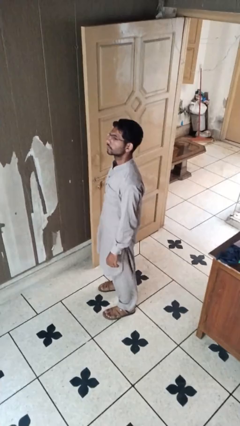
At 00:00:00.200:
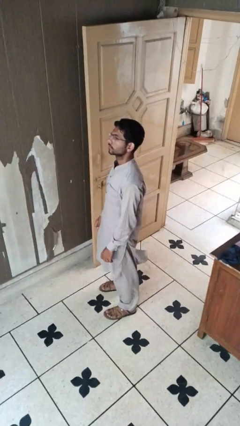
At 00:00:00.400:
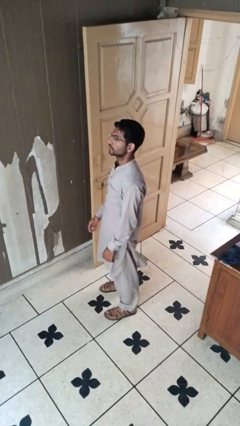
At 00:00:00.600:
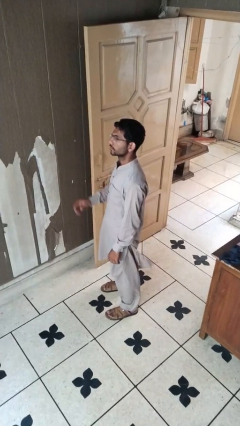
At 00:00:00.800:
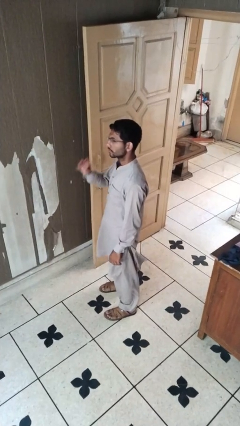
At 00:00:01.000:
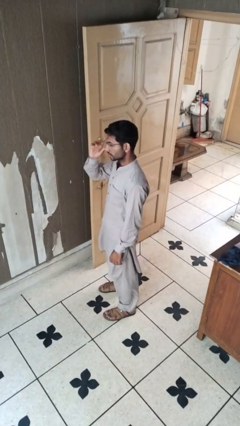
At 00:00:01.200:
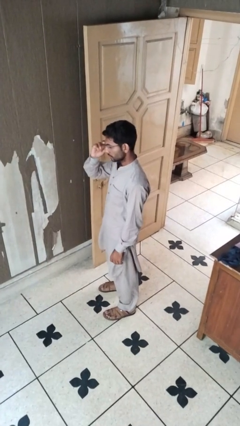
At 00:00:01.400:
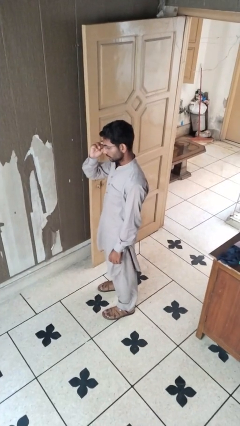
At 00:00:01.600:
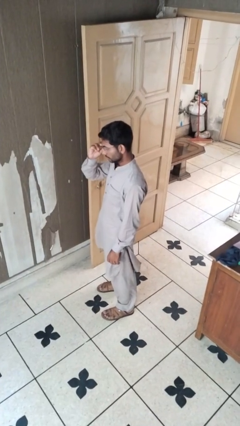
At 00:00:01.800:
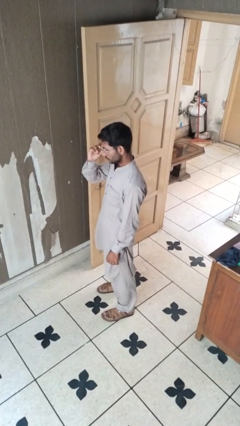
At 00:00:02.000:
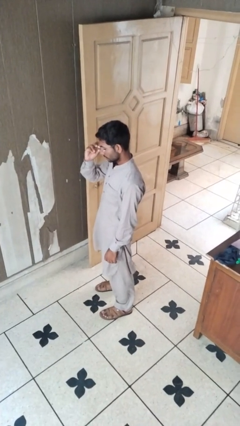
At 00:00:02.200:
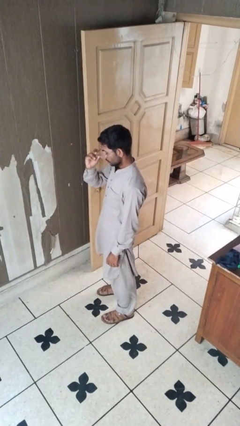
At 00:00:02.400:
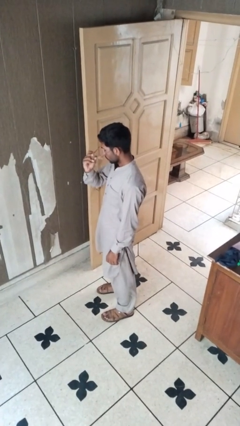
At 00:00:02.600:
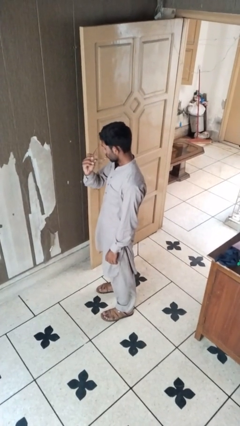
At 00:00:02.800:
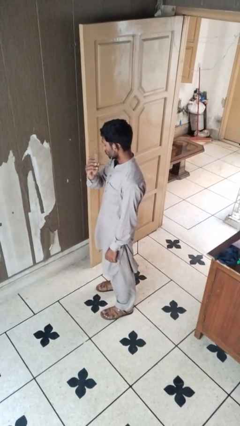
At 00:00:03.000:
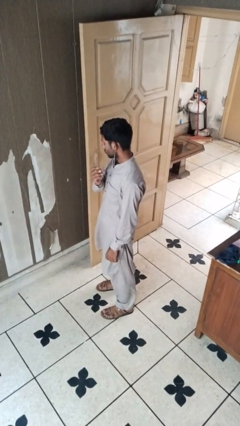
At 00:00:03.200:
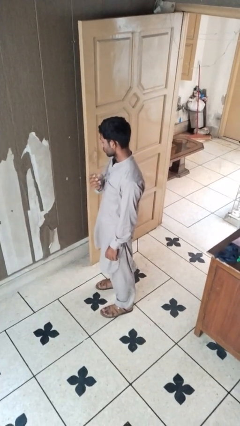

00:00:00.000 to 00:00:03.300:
person takes off glasses

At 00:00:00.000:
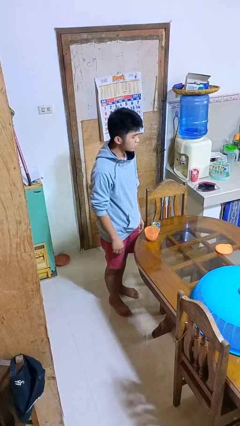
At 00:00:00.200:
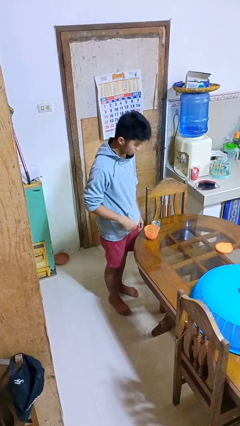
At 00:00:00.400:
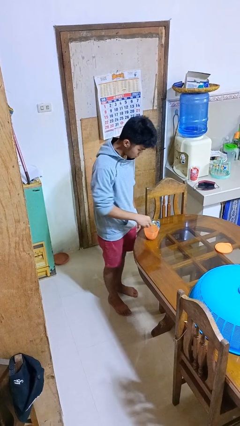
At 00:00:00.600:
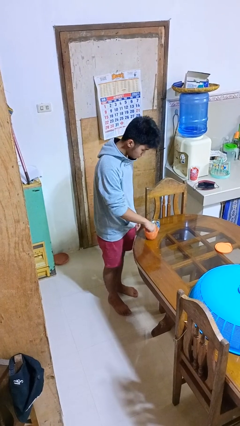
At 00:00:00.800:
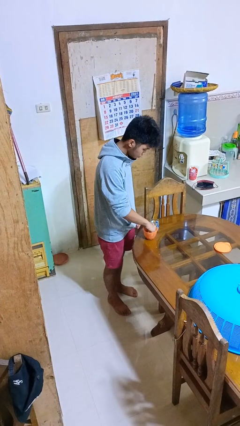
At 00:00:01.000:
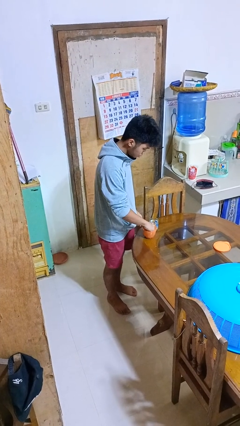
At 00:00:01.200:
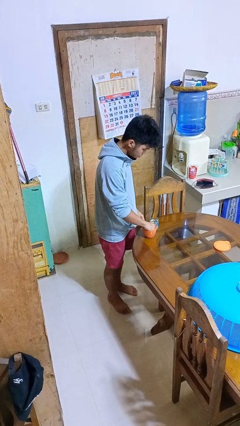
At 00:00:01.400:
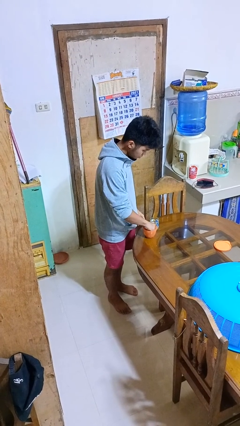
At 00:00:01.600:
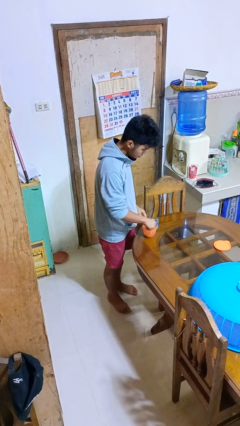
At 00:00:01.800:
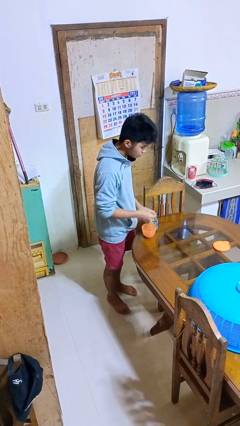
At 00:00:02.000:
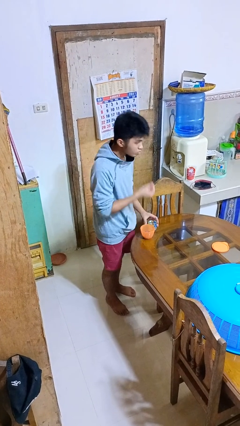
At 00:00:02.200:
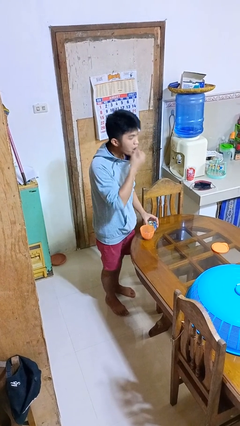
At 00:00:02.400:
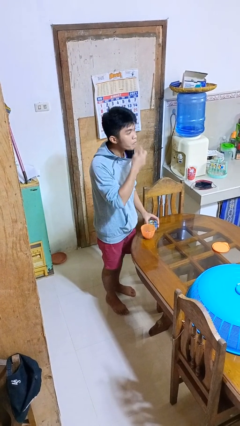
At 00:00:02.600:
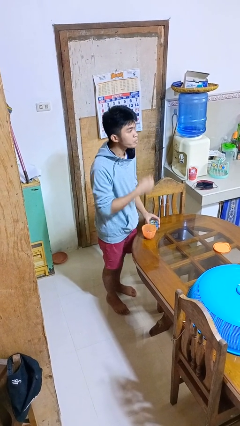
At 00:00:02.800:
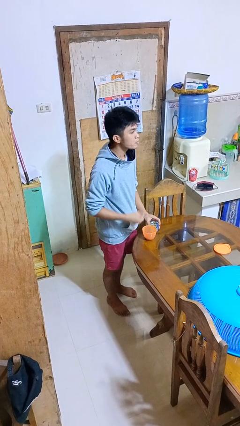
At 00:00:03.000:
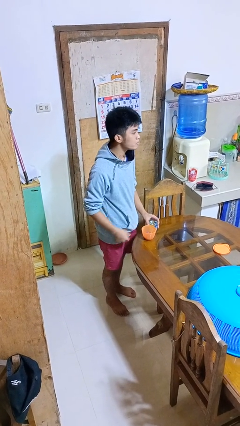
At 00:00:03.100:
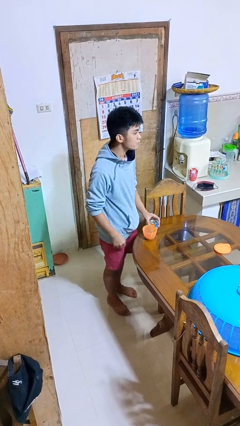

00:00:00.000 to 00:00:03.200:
person takes medicine pills

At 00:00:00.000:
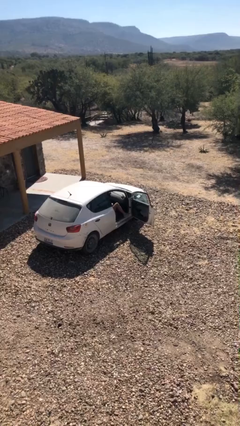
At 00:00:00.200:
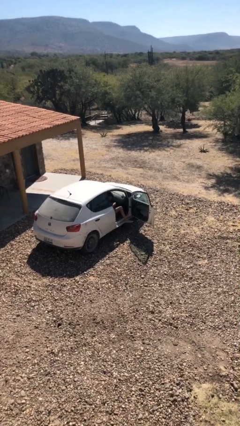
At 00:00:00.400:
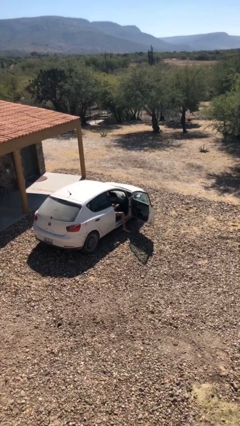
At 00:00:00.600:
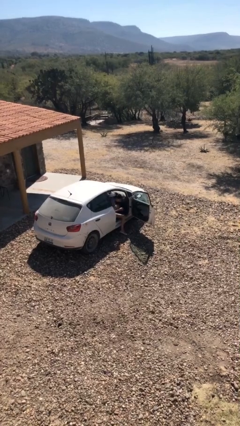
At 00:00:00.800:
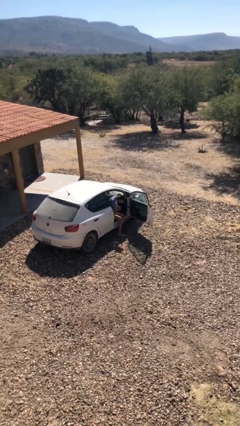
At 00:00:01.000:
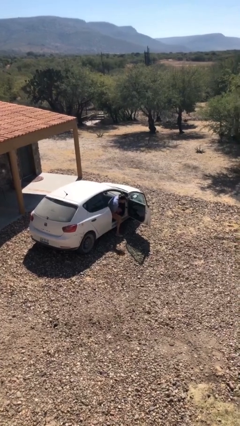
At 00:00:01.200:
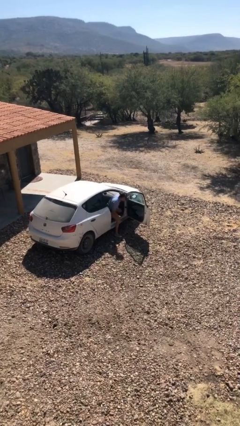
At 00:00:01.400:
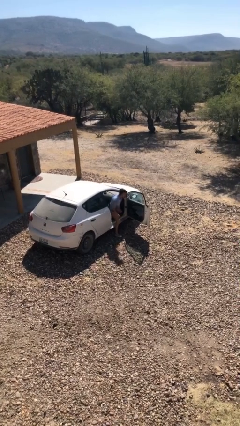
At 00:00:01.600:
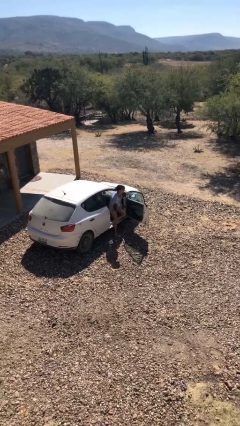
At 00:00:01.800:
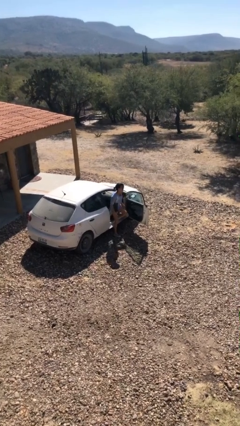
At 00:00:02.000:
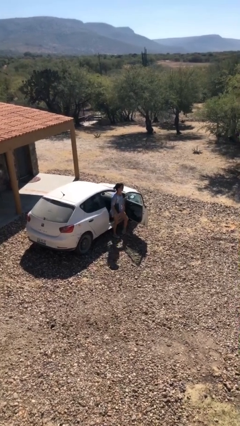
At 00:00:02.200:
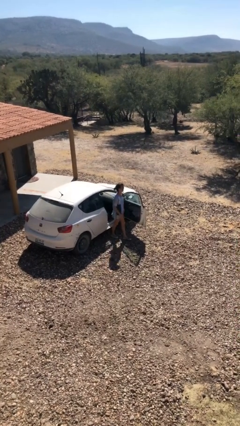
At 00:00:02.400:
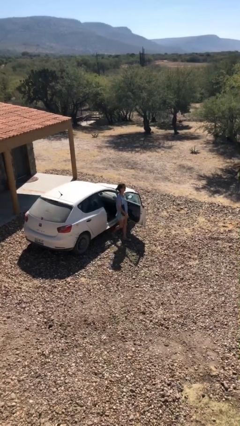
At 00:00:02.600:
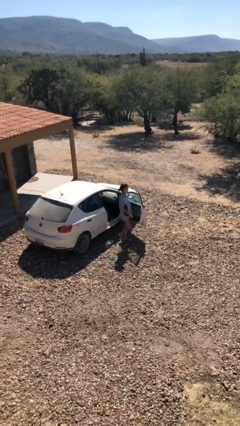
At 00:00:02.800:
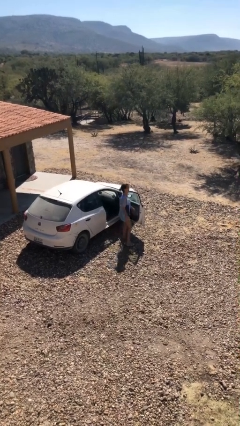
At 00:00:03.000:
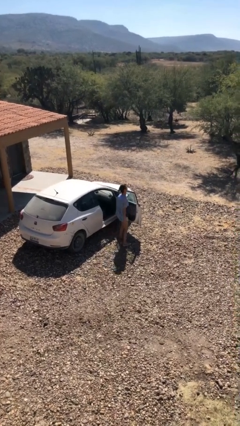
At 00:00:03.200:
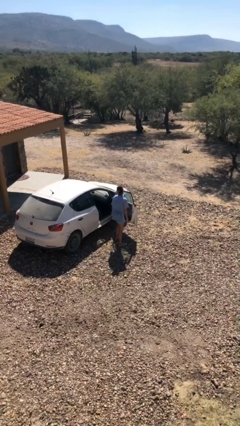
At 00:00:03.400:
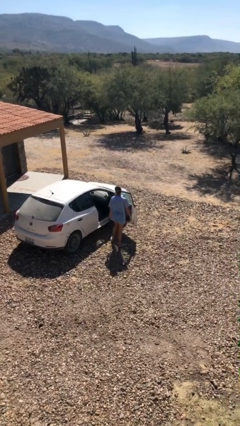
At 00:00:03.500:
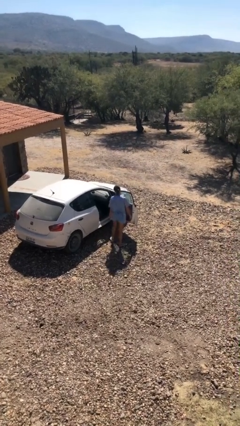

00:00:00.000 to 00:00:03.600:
person exits car

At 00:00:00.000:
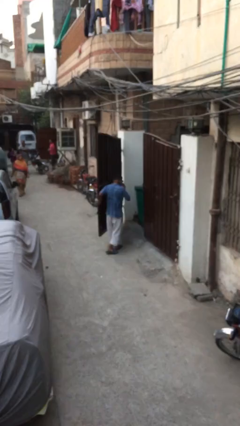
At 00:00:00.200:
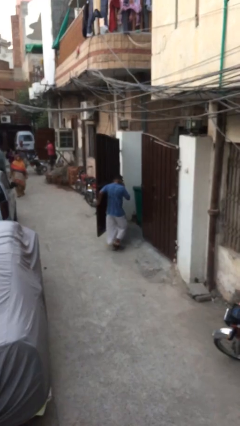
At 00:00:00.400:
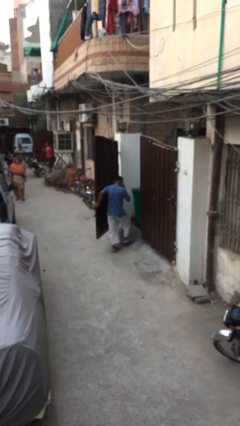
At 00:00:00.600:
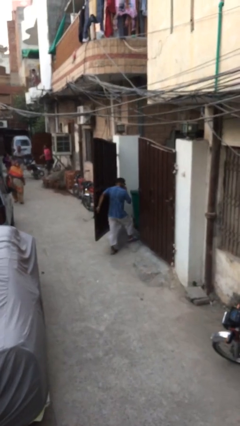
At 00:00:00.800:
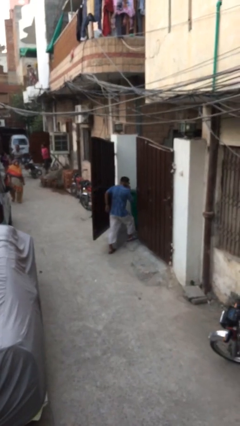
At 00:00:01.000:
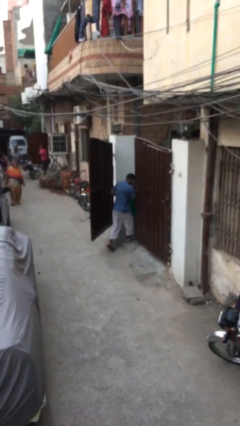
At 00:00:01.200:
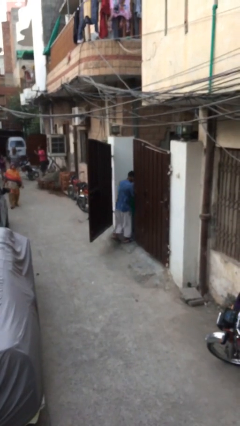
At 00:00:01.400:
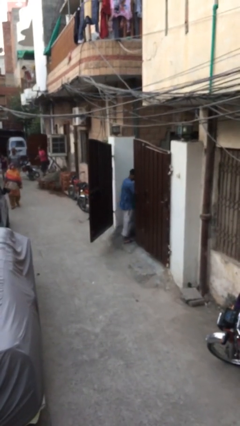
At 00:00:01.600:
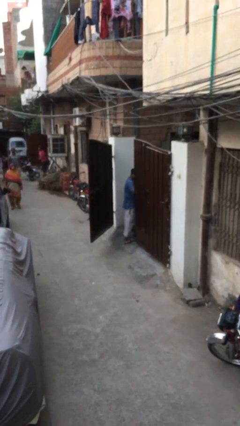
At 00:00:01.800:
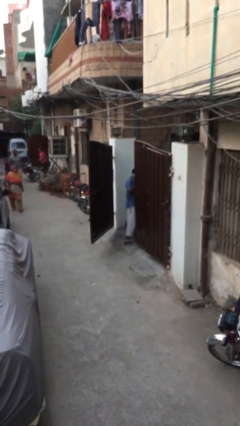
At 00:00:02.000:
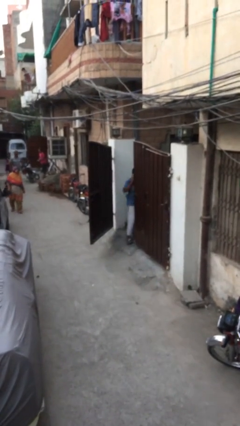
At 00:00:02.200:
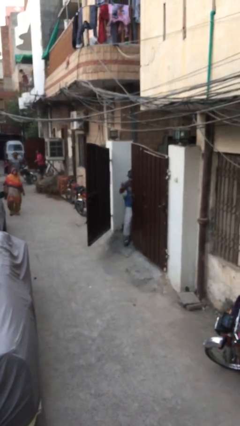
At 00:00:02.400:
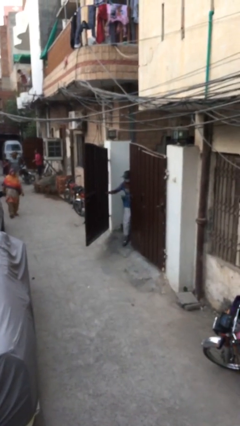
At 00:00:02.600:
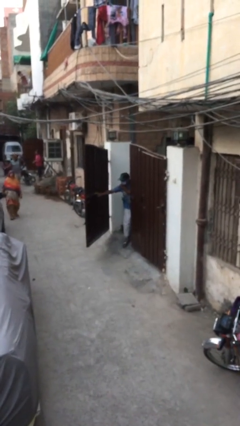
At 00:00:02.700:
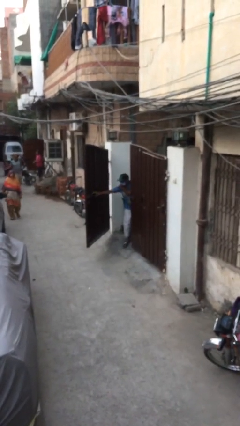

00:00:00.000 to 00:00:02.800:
person exits scene through structure

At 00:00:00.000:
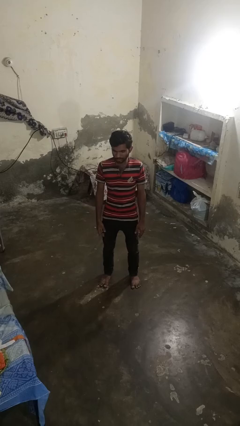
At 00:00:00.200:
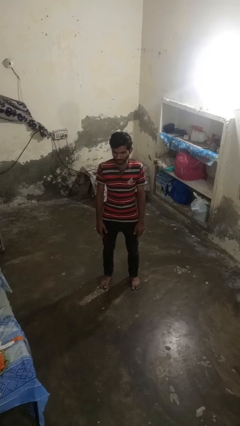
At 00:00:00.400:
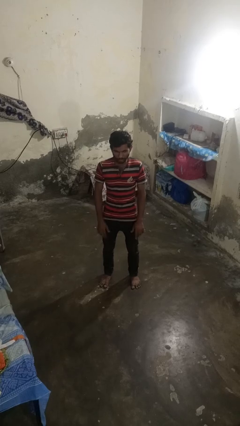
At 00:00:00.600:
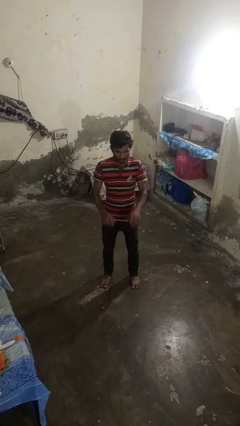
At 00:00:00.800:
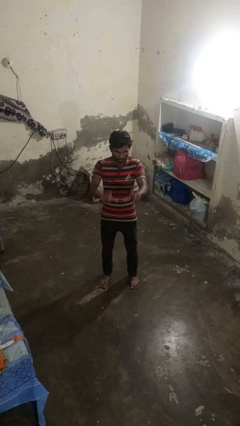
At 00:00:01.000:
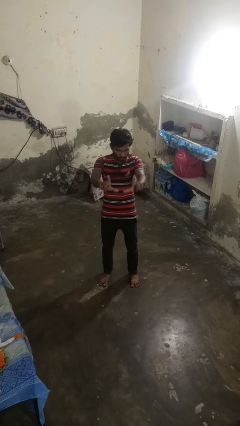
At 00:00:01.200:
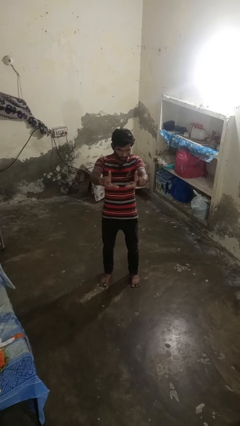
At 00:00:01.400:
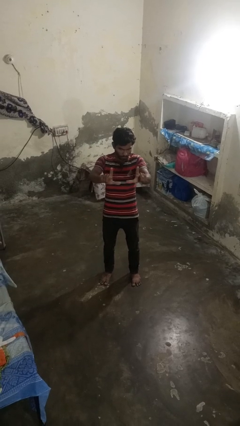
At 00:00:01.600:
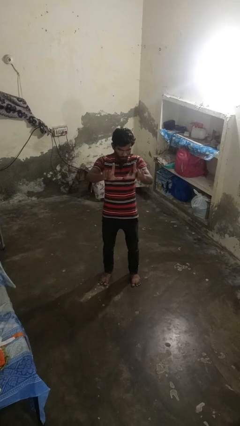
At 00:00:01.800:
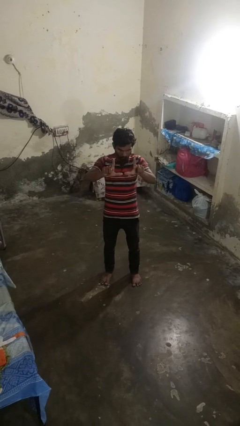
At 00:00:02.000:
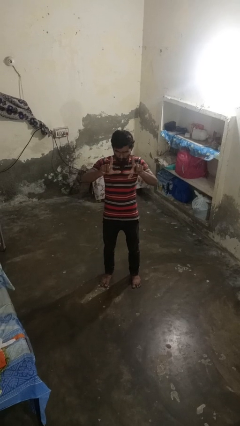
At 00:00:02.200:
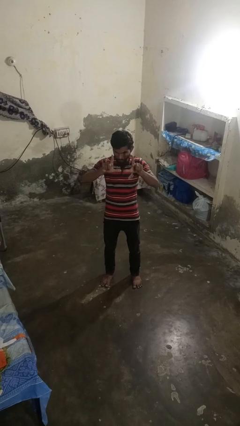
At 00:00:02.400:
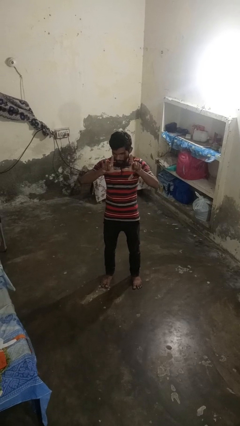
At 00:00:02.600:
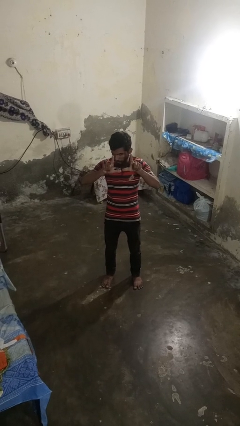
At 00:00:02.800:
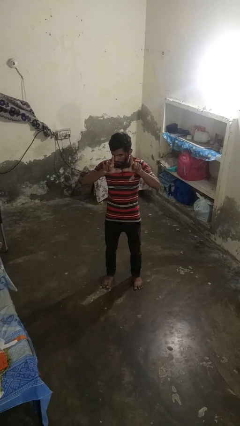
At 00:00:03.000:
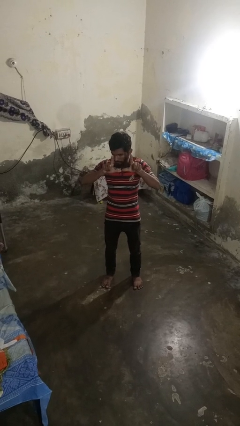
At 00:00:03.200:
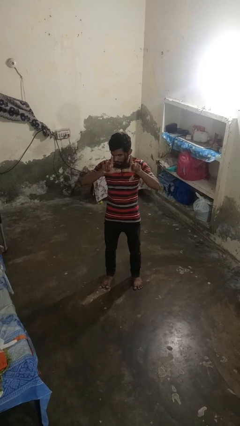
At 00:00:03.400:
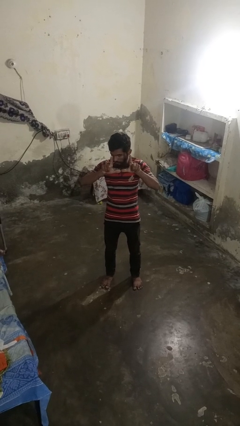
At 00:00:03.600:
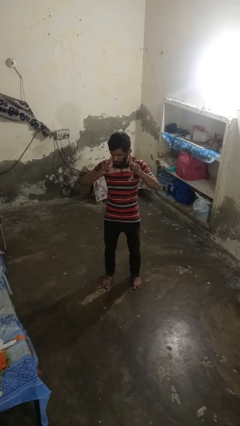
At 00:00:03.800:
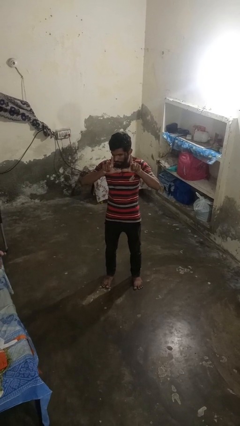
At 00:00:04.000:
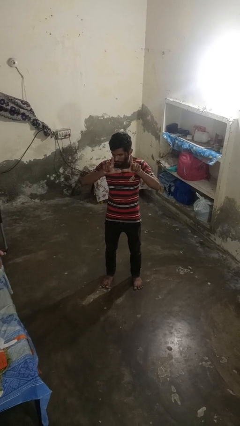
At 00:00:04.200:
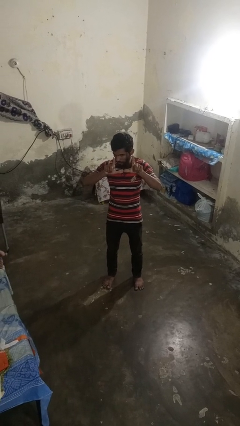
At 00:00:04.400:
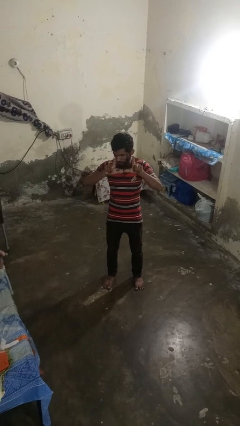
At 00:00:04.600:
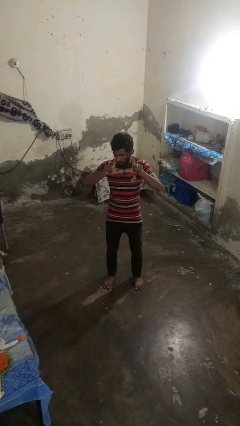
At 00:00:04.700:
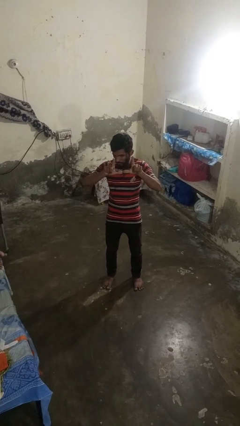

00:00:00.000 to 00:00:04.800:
person gestures zoom in
